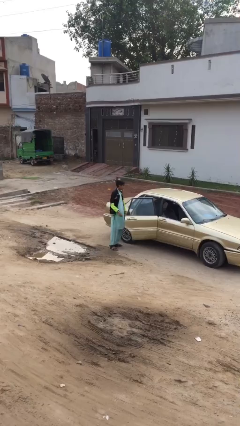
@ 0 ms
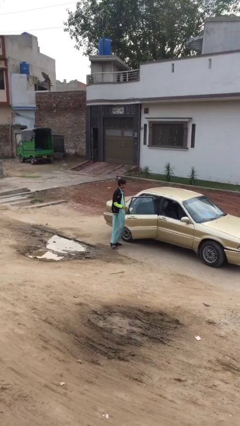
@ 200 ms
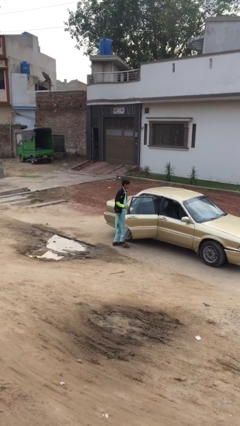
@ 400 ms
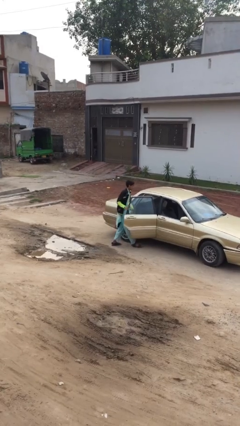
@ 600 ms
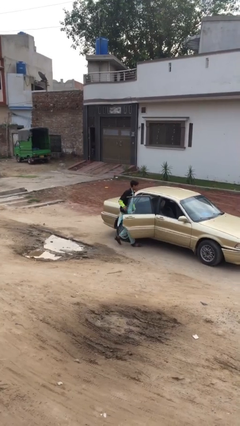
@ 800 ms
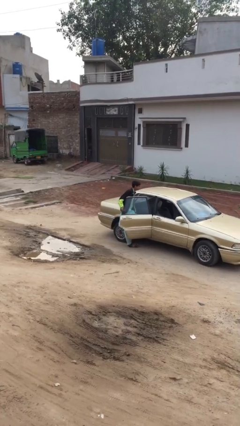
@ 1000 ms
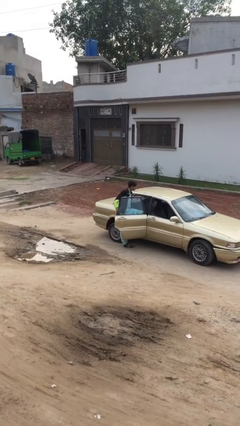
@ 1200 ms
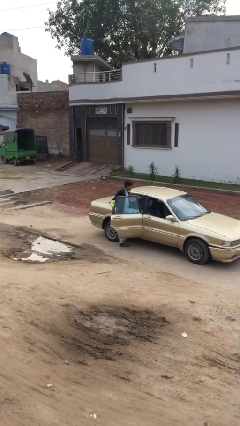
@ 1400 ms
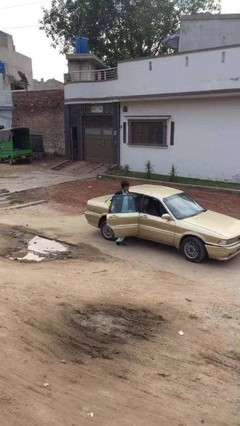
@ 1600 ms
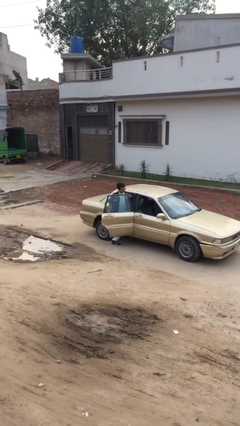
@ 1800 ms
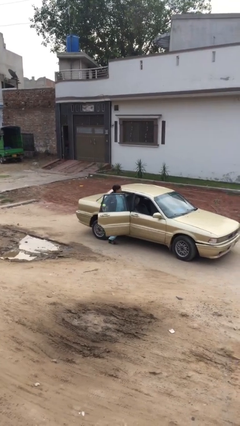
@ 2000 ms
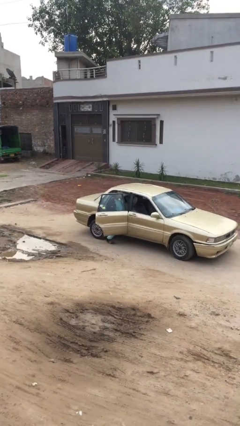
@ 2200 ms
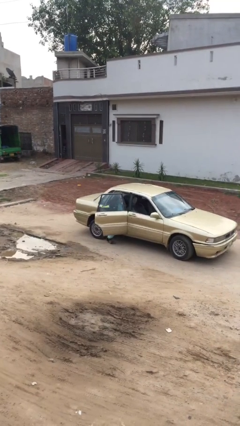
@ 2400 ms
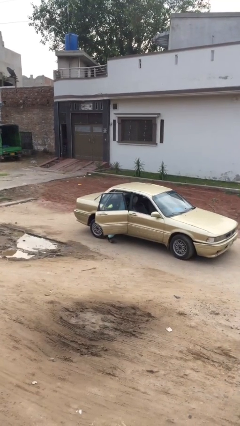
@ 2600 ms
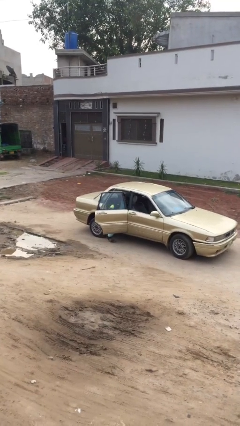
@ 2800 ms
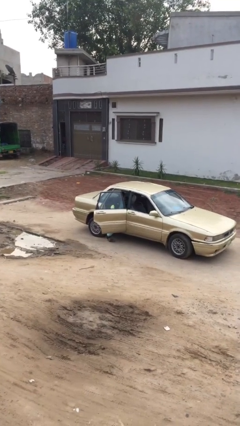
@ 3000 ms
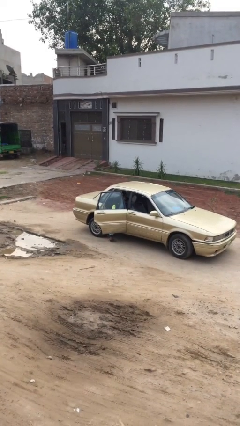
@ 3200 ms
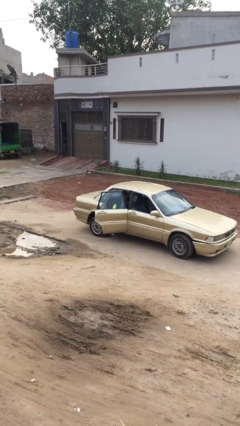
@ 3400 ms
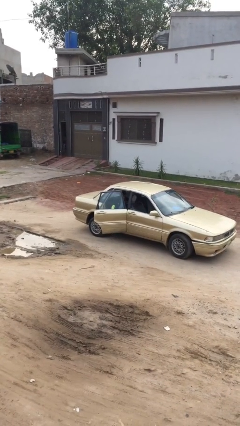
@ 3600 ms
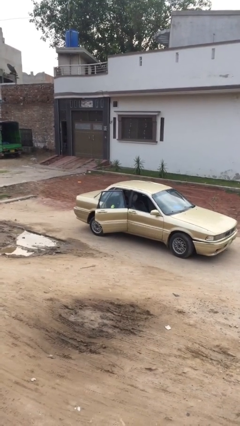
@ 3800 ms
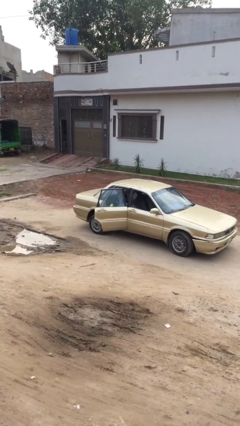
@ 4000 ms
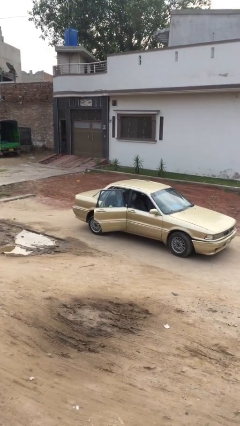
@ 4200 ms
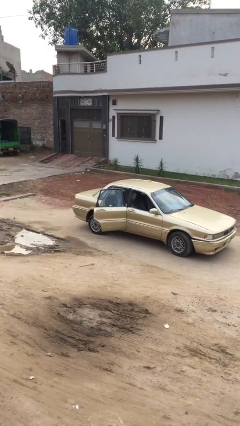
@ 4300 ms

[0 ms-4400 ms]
person enters car

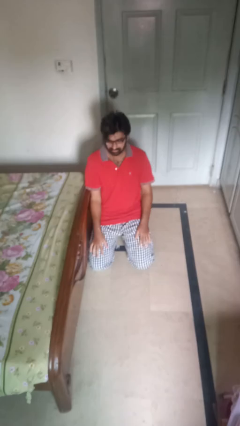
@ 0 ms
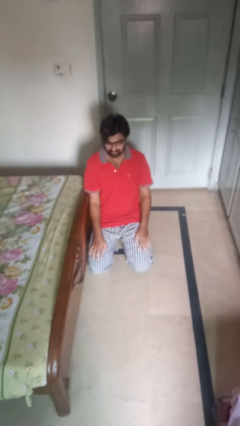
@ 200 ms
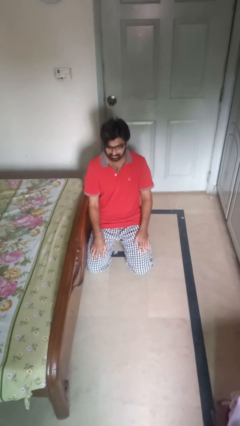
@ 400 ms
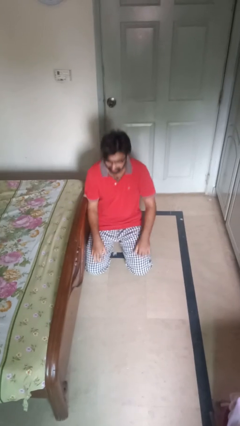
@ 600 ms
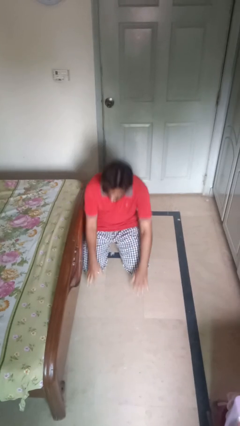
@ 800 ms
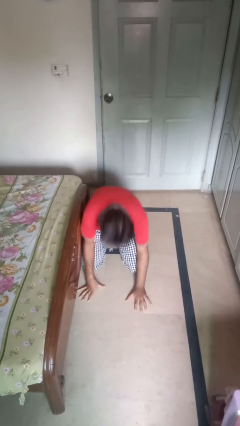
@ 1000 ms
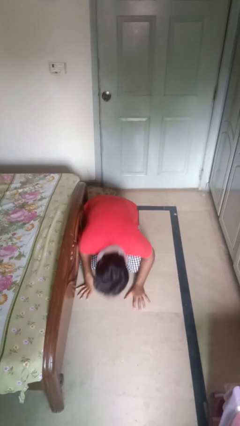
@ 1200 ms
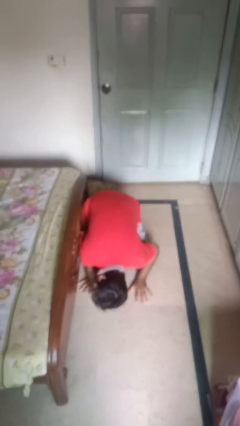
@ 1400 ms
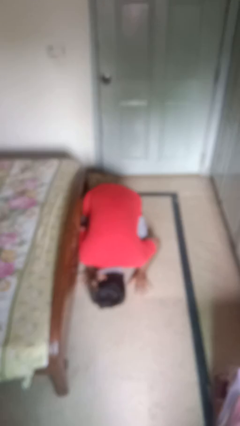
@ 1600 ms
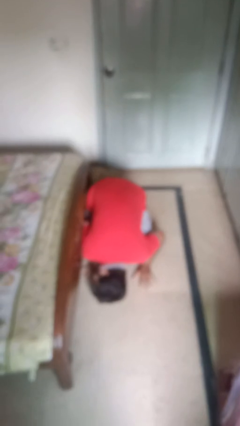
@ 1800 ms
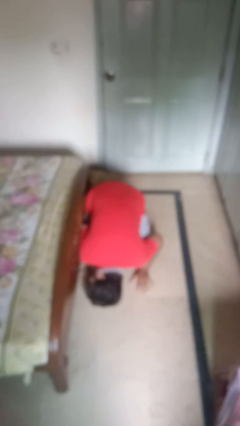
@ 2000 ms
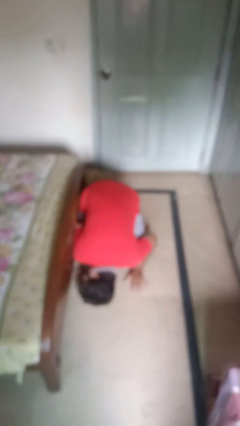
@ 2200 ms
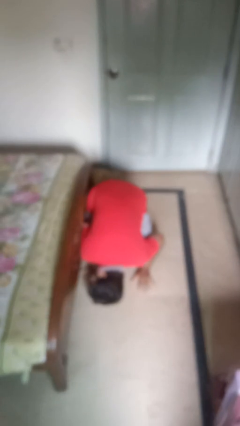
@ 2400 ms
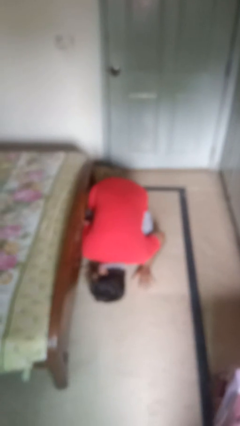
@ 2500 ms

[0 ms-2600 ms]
person searches under bed

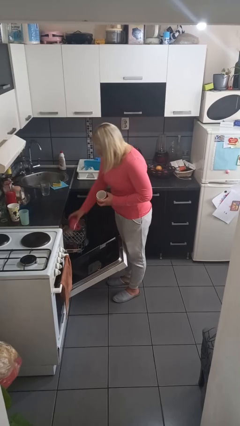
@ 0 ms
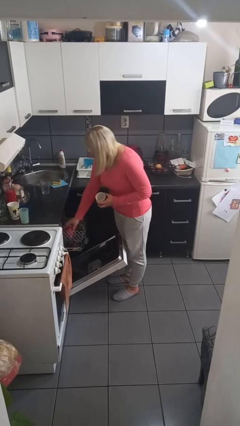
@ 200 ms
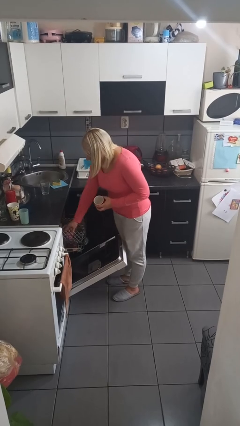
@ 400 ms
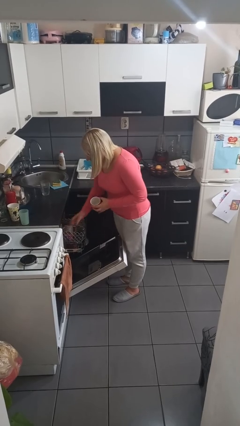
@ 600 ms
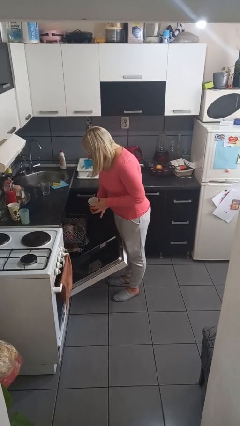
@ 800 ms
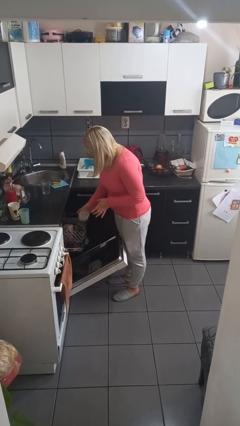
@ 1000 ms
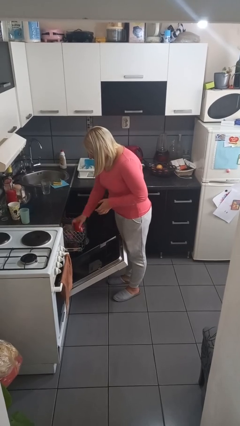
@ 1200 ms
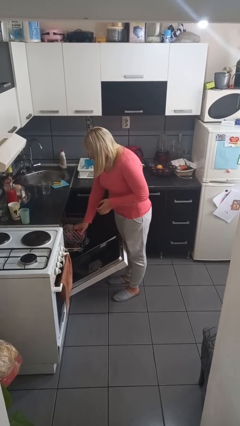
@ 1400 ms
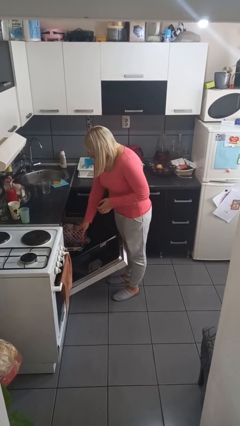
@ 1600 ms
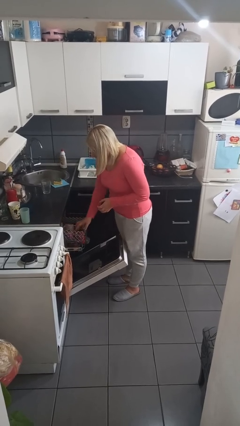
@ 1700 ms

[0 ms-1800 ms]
person loads dishwasher

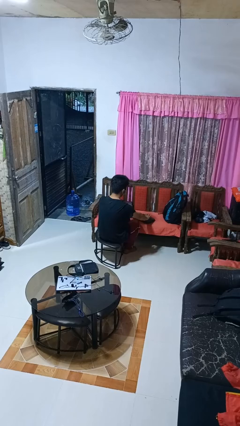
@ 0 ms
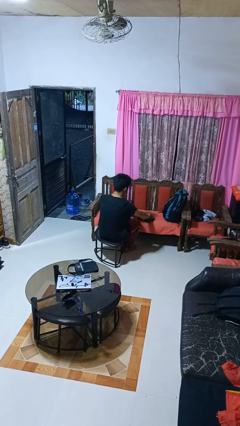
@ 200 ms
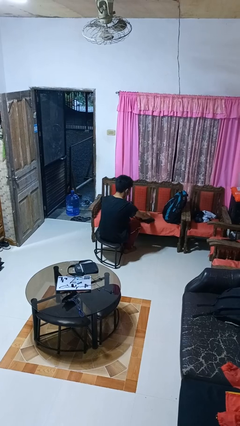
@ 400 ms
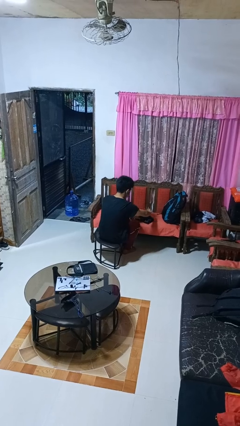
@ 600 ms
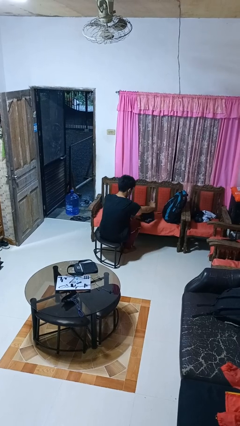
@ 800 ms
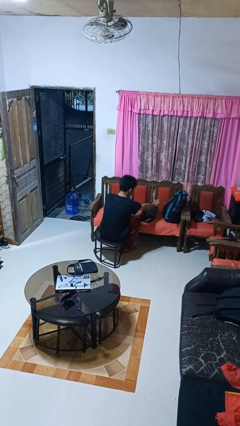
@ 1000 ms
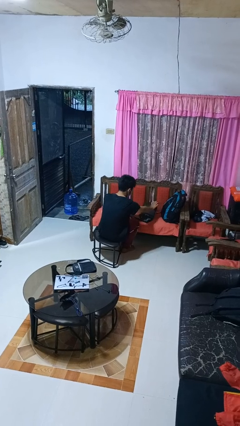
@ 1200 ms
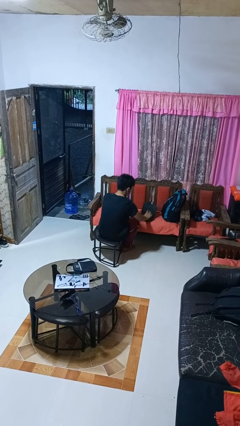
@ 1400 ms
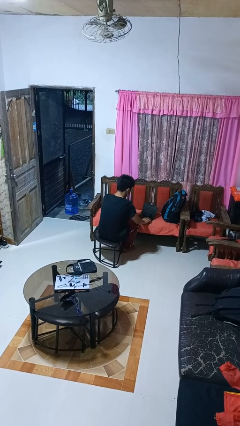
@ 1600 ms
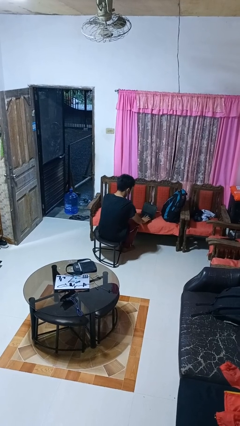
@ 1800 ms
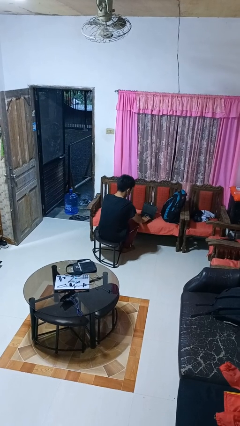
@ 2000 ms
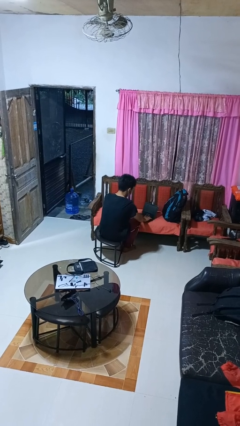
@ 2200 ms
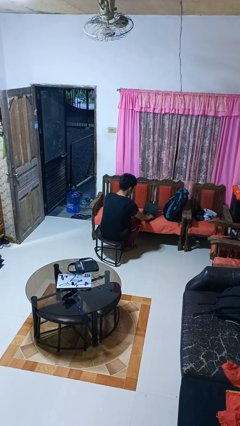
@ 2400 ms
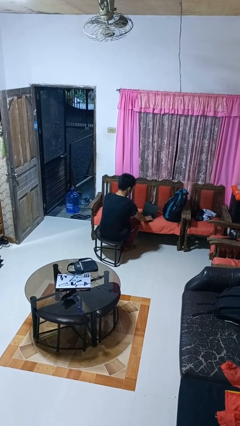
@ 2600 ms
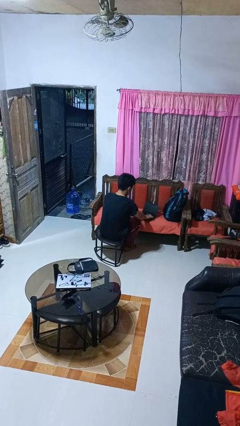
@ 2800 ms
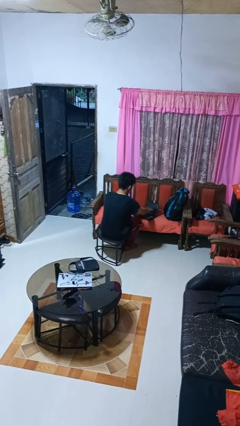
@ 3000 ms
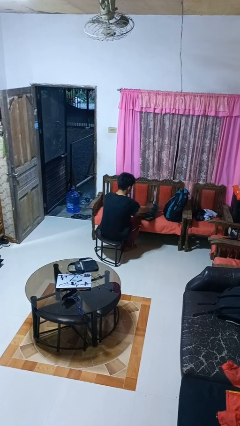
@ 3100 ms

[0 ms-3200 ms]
person opens laptop

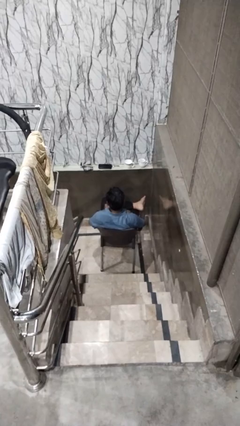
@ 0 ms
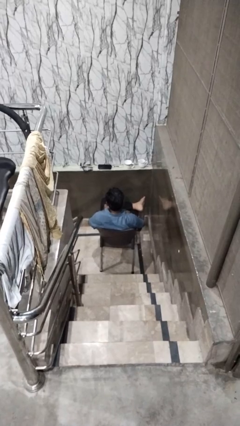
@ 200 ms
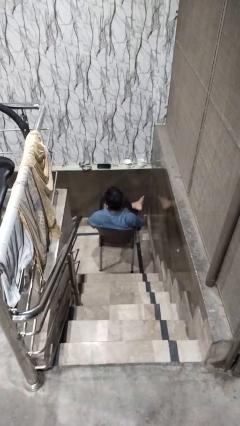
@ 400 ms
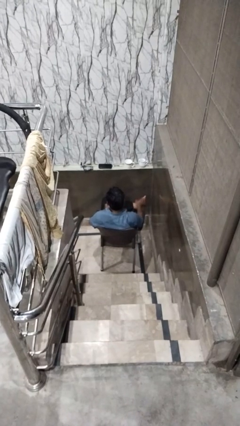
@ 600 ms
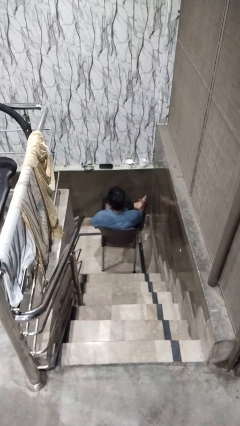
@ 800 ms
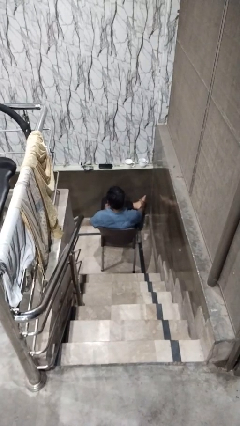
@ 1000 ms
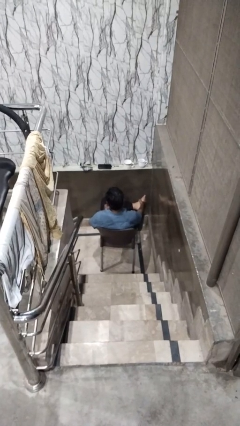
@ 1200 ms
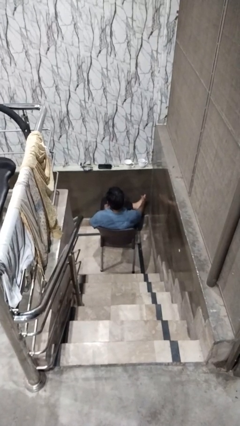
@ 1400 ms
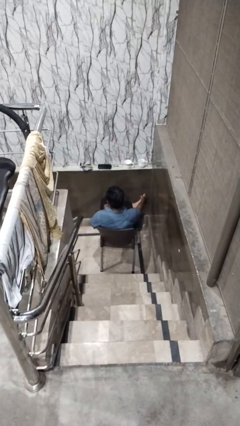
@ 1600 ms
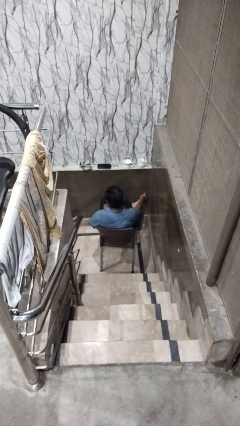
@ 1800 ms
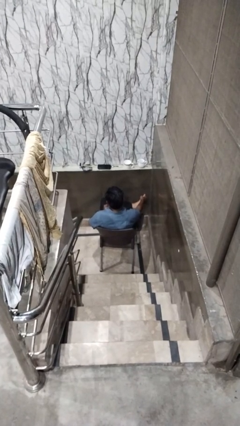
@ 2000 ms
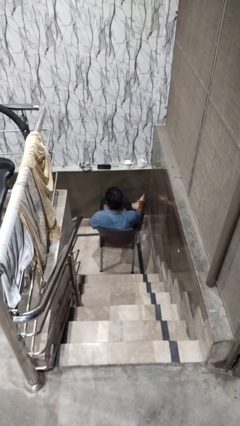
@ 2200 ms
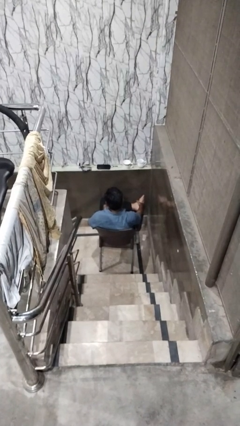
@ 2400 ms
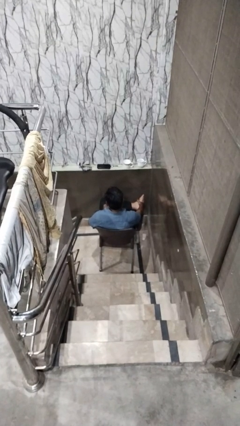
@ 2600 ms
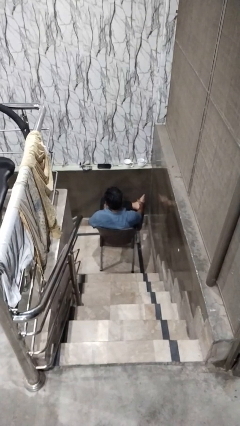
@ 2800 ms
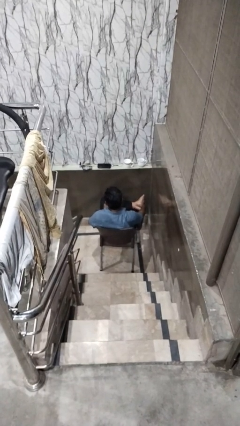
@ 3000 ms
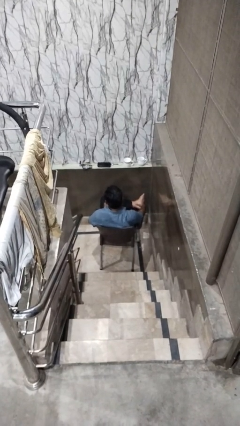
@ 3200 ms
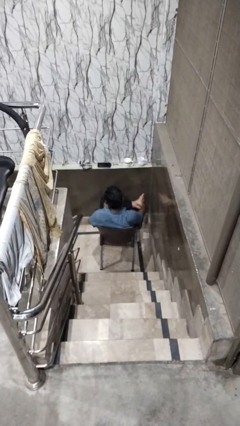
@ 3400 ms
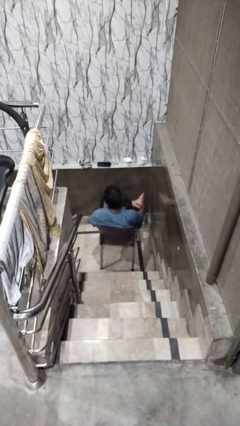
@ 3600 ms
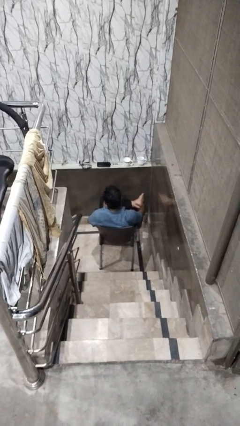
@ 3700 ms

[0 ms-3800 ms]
person rubs foot

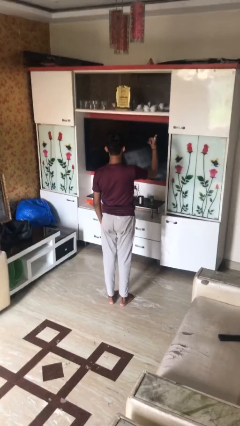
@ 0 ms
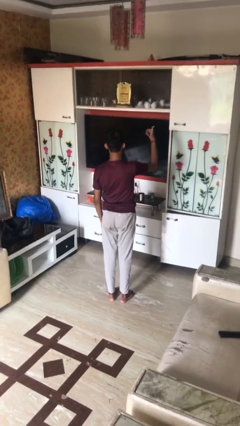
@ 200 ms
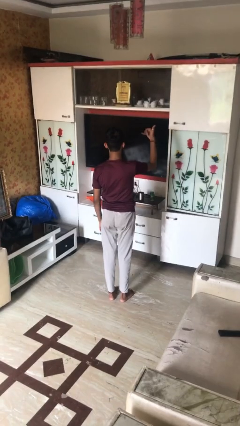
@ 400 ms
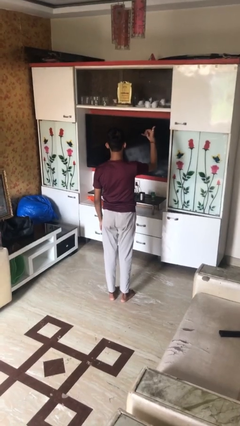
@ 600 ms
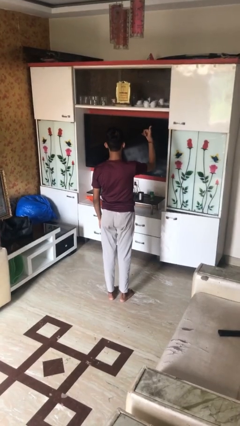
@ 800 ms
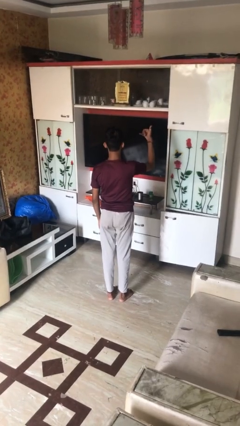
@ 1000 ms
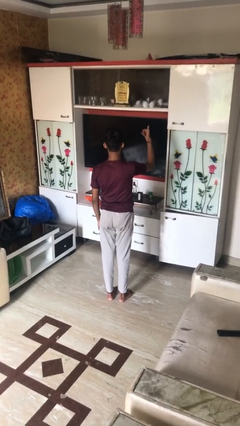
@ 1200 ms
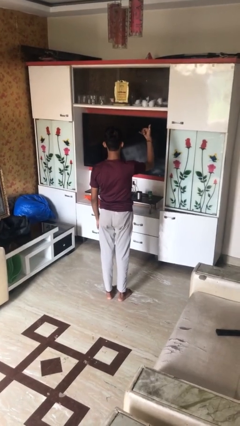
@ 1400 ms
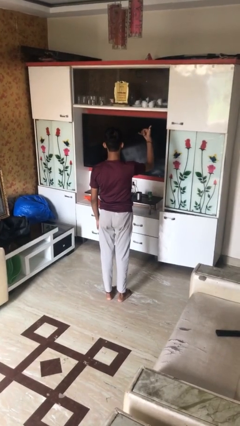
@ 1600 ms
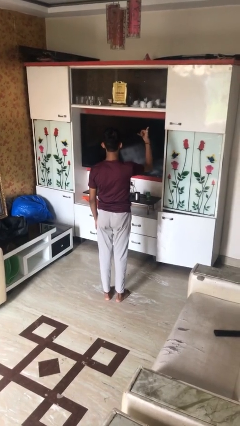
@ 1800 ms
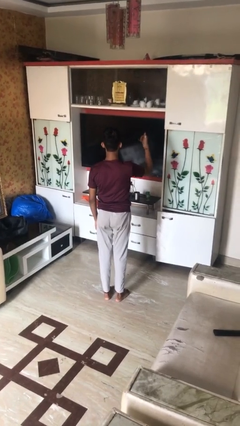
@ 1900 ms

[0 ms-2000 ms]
person gestures hang loose
